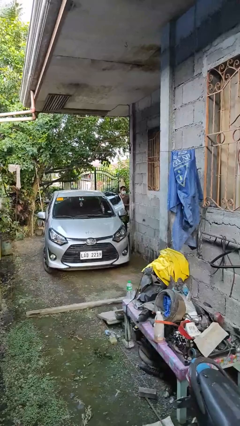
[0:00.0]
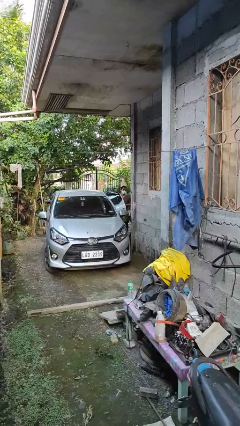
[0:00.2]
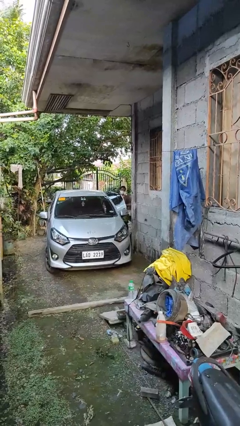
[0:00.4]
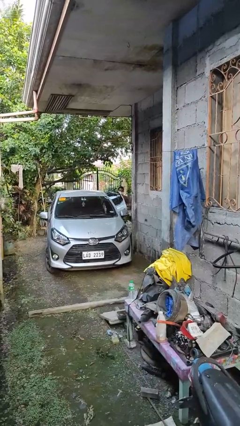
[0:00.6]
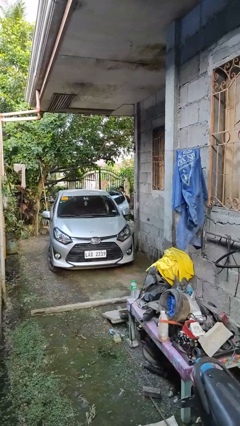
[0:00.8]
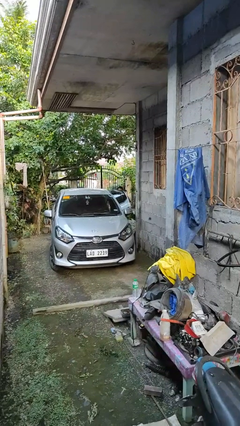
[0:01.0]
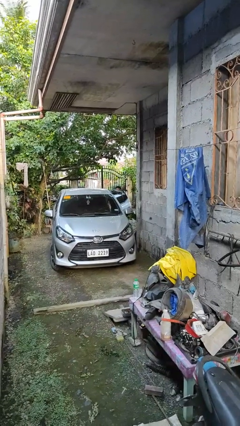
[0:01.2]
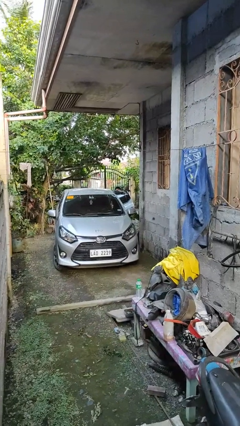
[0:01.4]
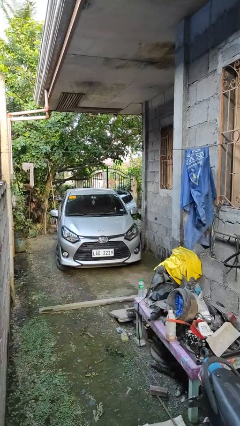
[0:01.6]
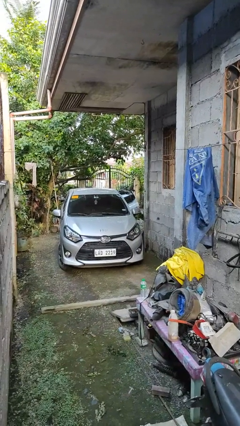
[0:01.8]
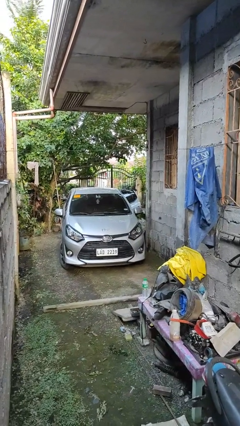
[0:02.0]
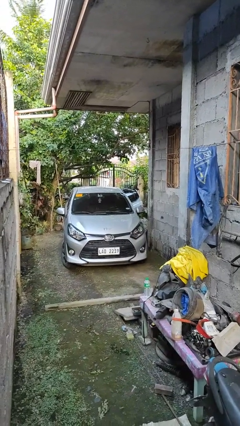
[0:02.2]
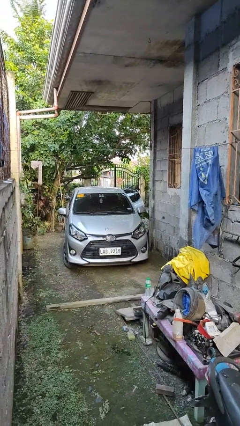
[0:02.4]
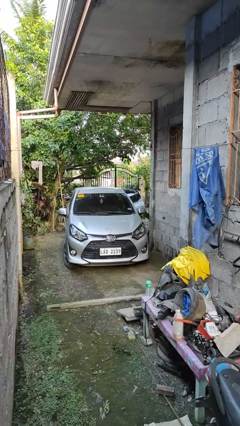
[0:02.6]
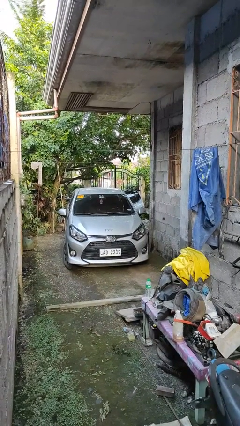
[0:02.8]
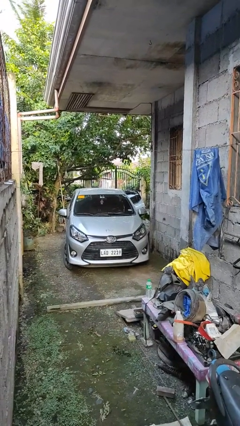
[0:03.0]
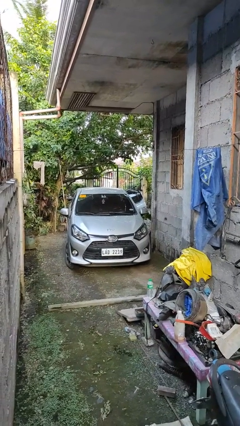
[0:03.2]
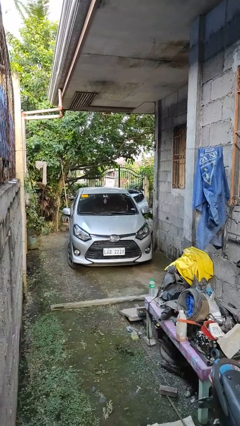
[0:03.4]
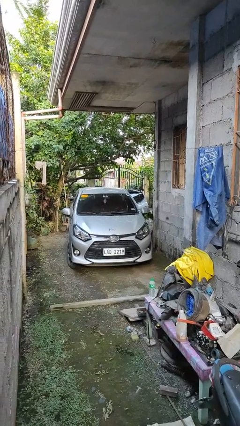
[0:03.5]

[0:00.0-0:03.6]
person enters car

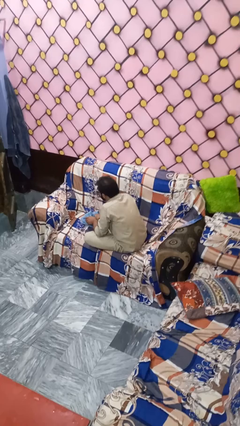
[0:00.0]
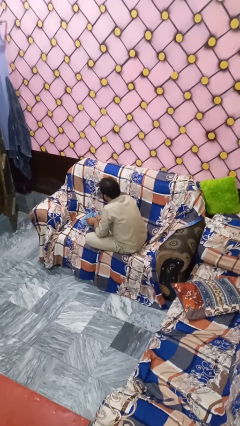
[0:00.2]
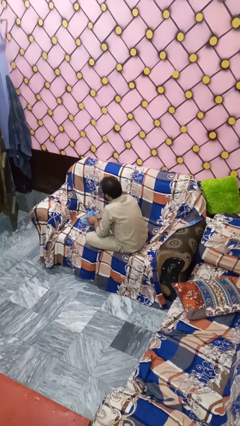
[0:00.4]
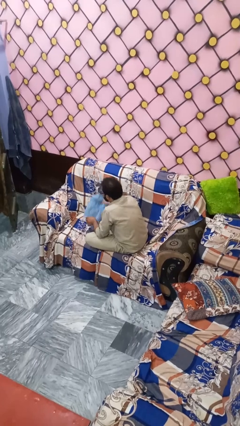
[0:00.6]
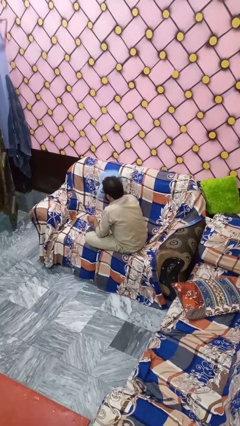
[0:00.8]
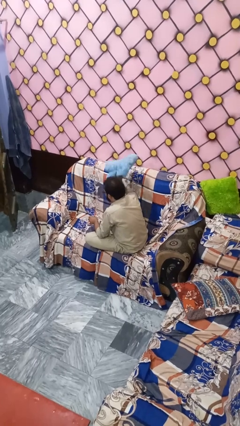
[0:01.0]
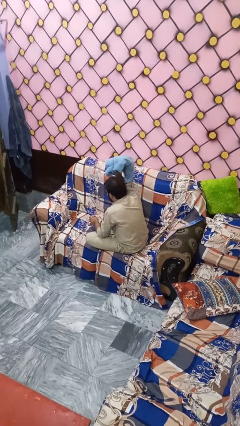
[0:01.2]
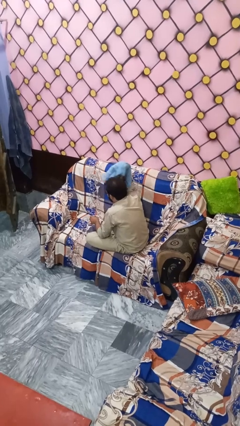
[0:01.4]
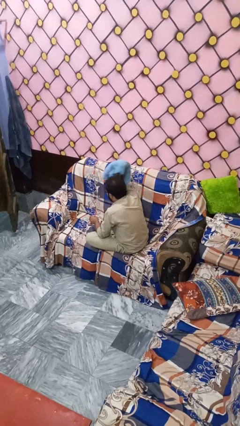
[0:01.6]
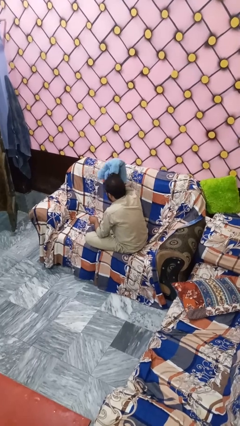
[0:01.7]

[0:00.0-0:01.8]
person dries hair with towel

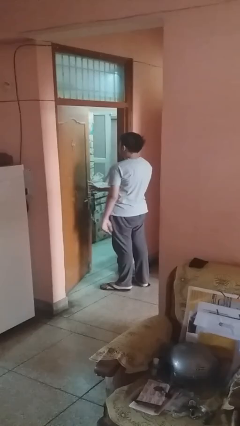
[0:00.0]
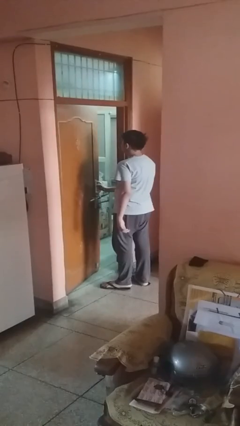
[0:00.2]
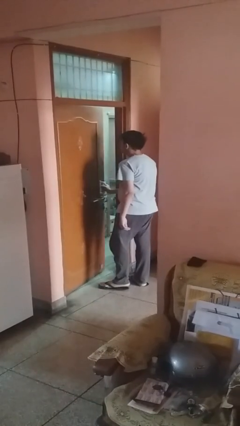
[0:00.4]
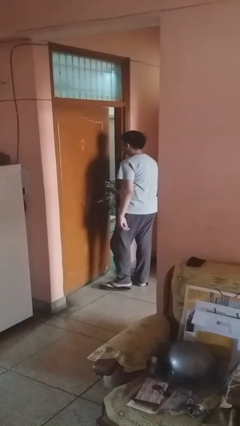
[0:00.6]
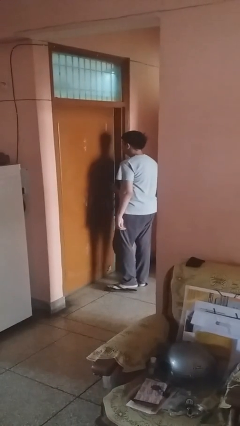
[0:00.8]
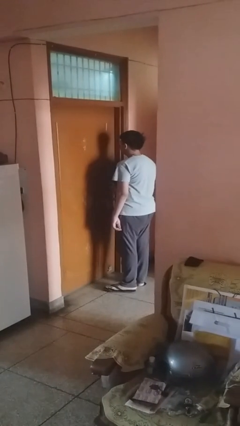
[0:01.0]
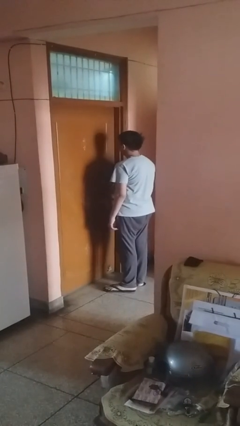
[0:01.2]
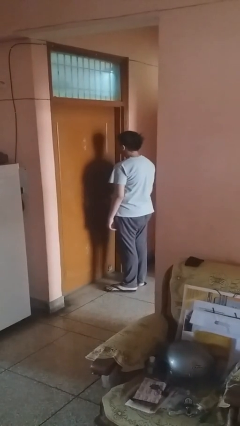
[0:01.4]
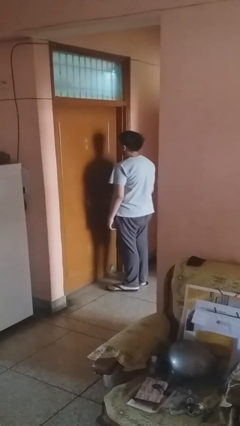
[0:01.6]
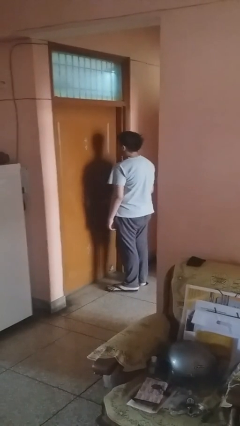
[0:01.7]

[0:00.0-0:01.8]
person closes facility door

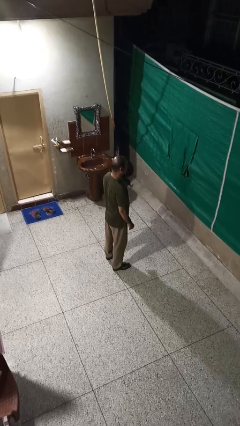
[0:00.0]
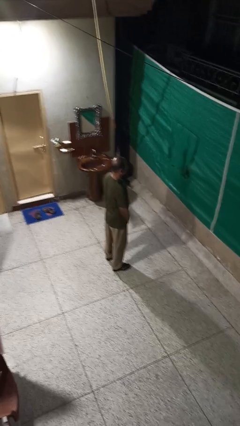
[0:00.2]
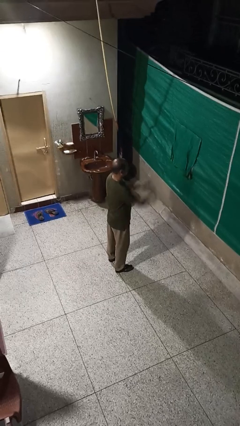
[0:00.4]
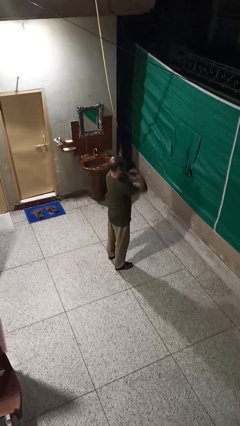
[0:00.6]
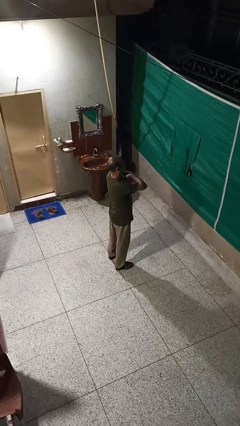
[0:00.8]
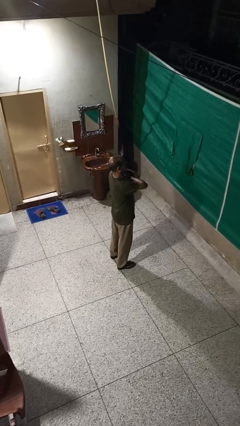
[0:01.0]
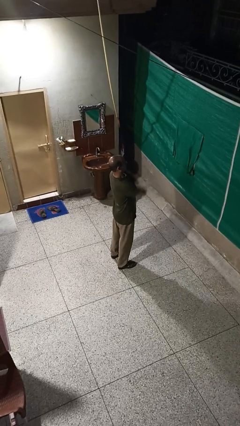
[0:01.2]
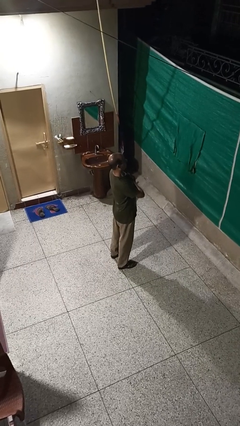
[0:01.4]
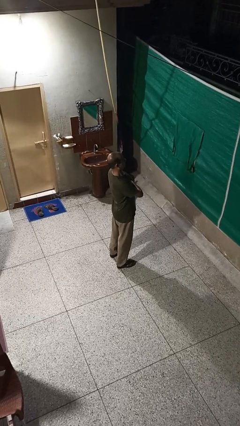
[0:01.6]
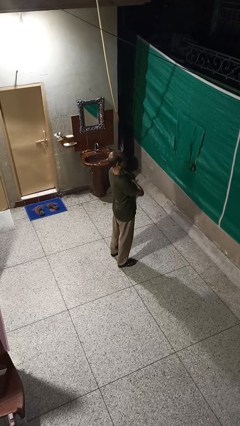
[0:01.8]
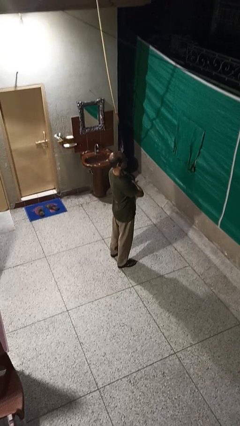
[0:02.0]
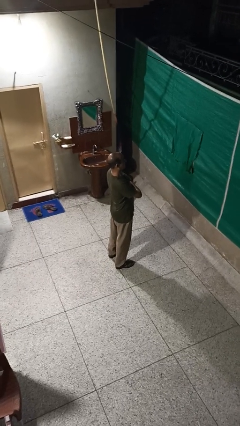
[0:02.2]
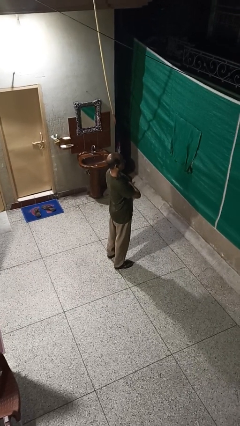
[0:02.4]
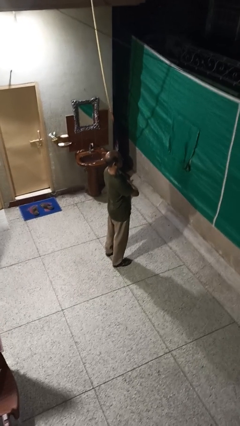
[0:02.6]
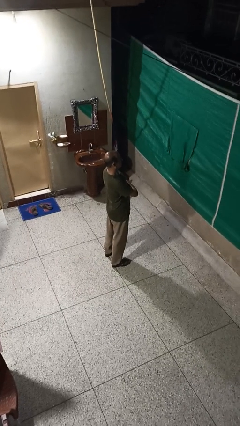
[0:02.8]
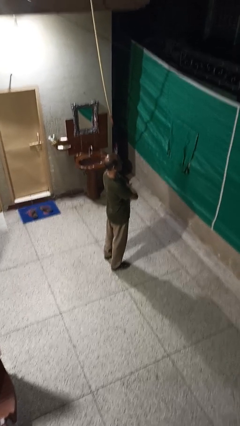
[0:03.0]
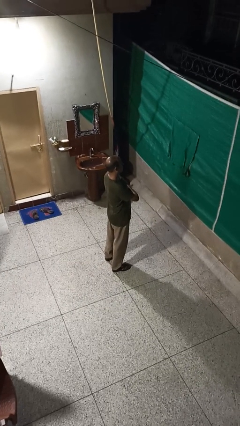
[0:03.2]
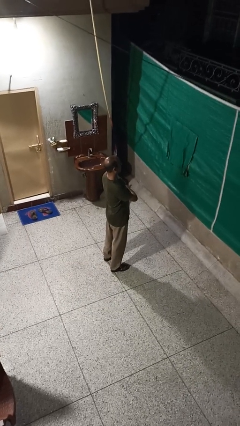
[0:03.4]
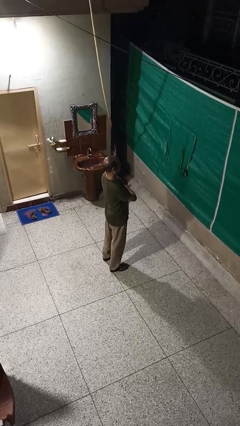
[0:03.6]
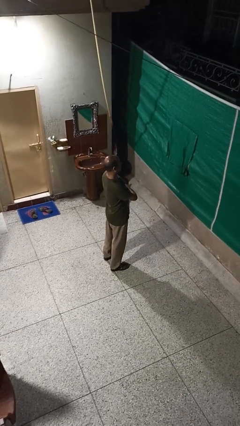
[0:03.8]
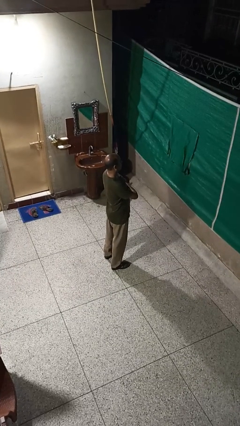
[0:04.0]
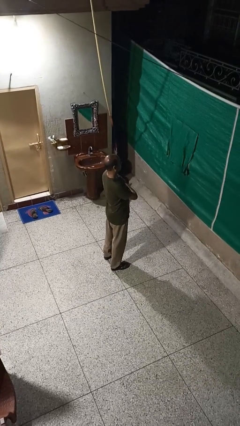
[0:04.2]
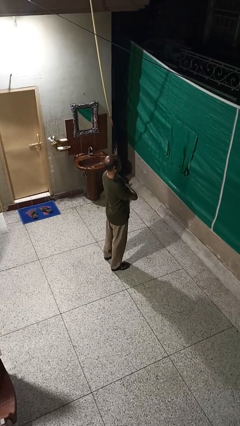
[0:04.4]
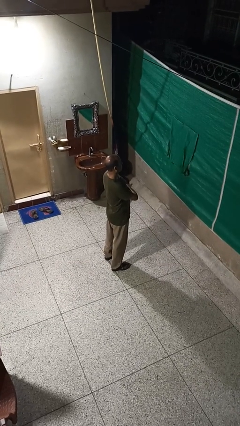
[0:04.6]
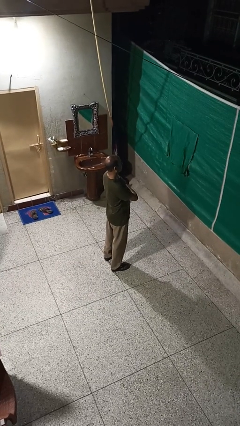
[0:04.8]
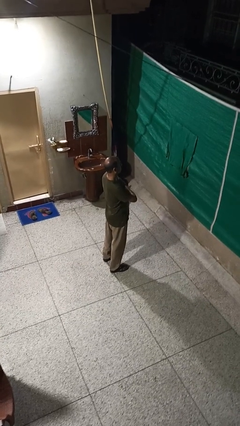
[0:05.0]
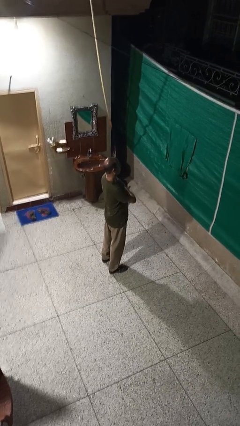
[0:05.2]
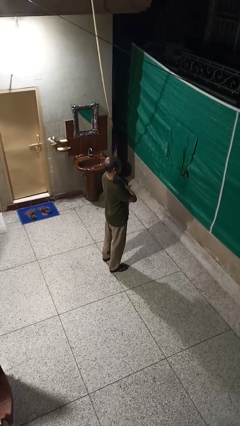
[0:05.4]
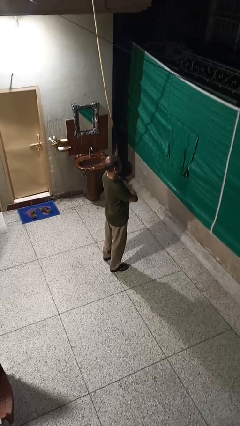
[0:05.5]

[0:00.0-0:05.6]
person crosses arms

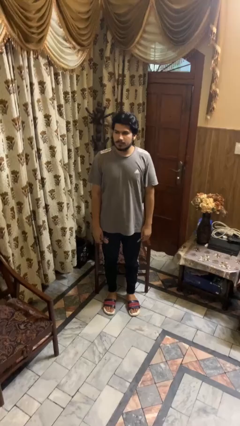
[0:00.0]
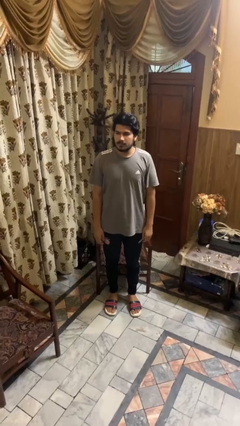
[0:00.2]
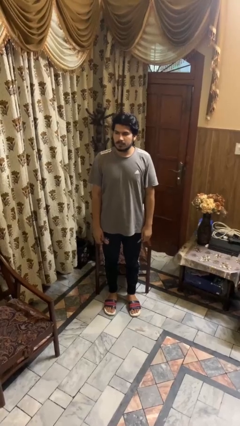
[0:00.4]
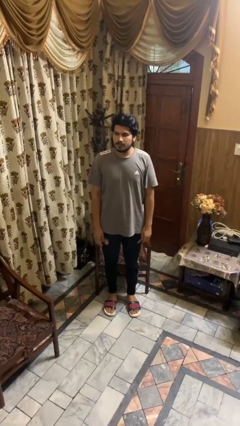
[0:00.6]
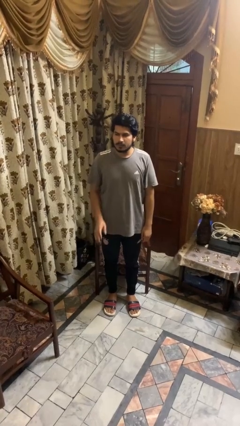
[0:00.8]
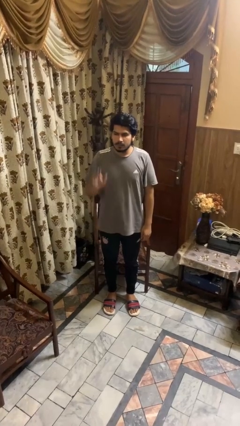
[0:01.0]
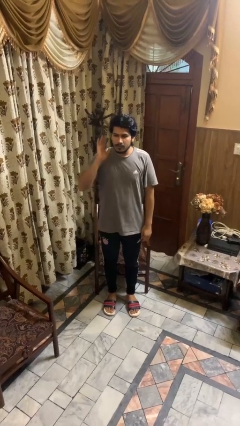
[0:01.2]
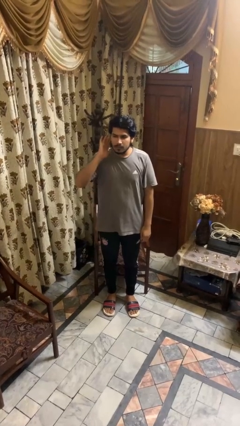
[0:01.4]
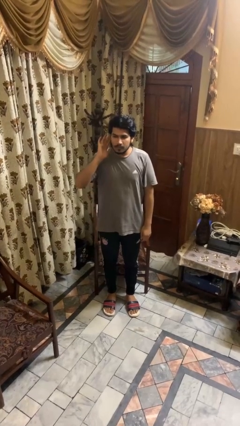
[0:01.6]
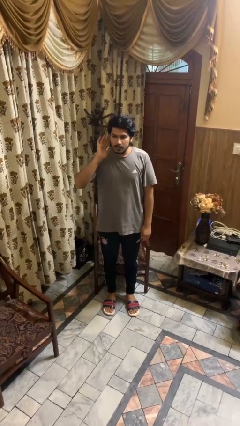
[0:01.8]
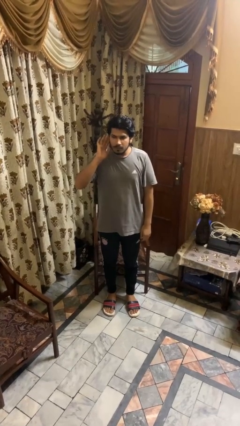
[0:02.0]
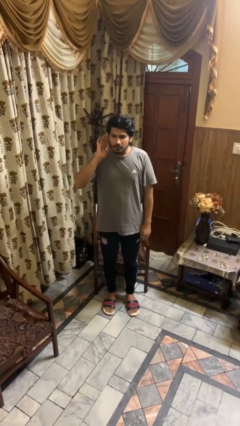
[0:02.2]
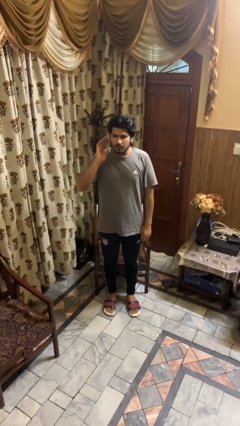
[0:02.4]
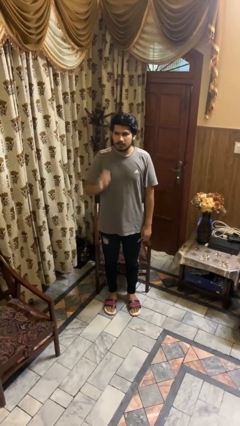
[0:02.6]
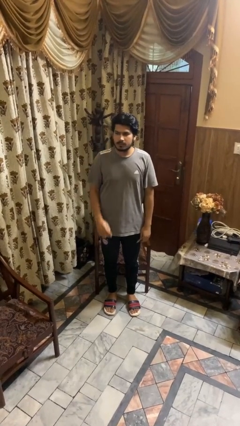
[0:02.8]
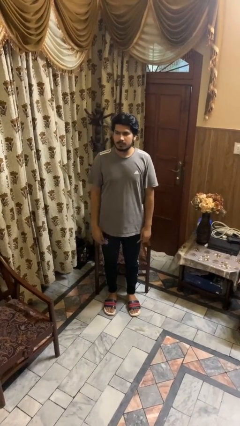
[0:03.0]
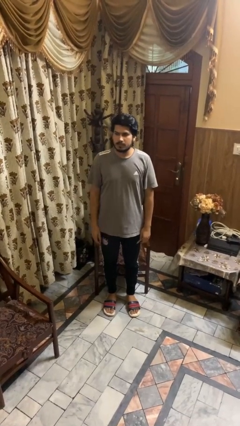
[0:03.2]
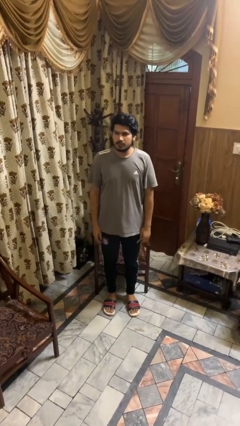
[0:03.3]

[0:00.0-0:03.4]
person gestures listen closely

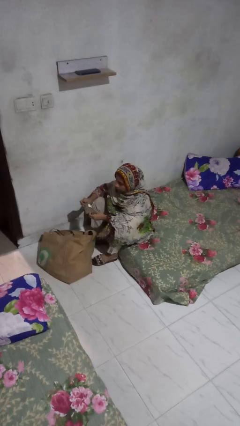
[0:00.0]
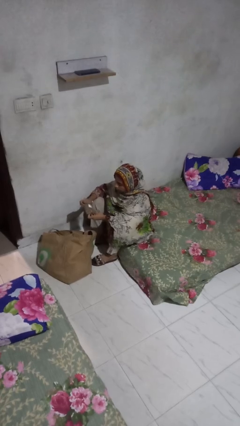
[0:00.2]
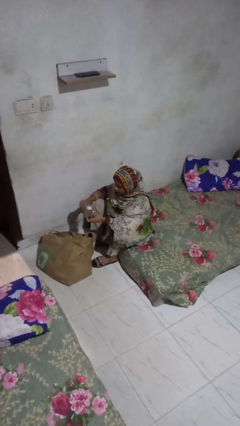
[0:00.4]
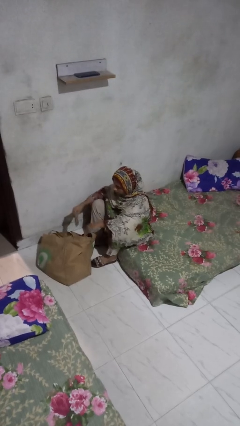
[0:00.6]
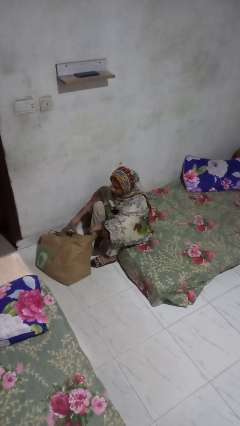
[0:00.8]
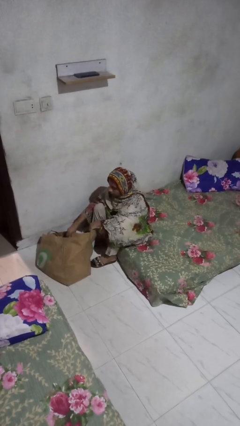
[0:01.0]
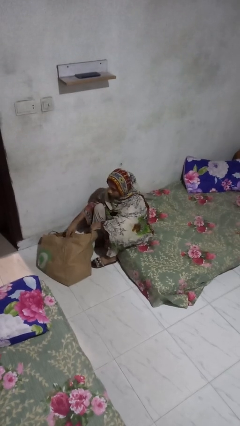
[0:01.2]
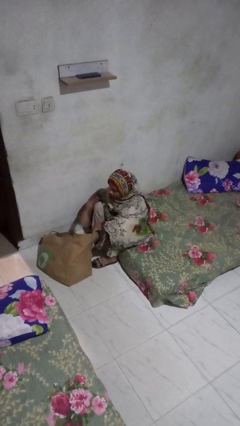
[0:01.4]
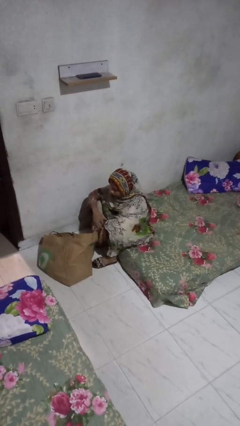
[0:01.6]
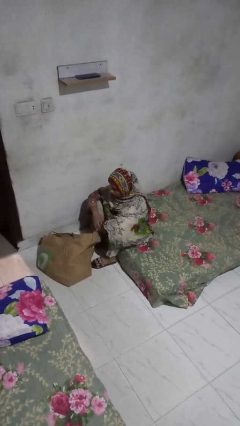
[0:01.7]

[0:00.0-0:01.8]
person puts object into bag
